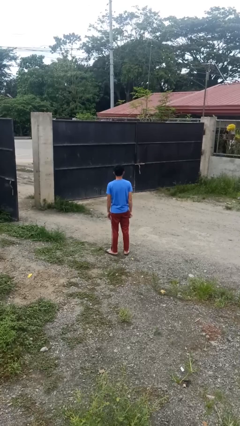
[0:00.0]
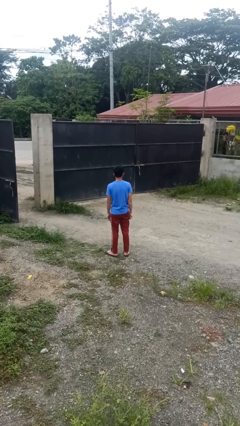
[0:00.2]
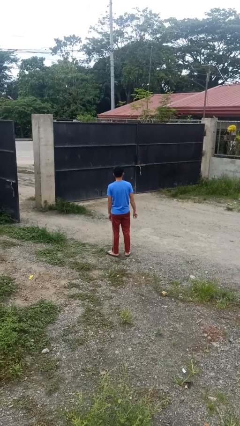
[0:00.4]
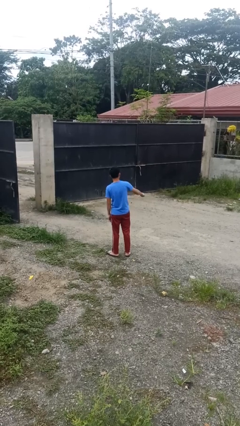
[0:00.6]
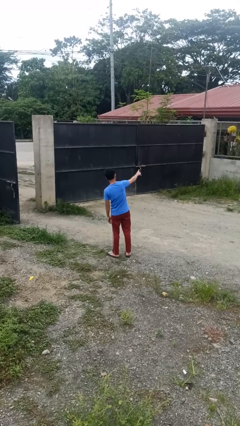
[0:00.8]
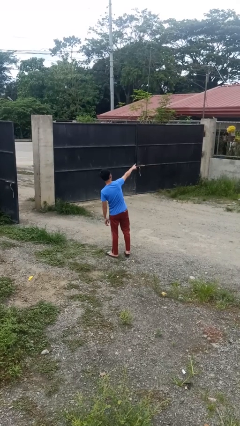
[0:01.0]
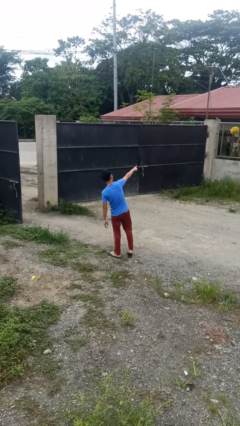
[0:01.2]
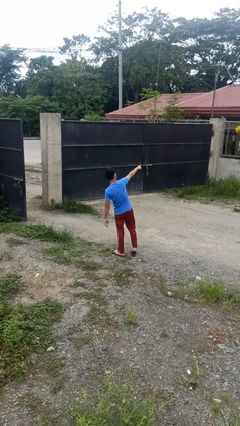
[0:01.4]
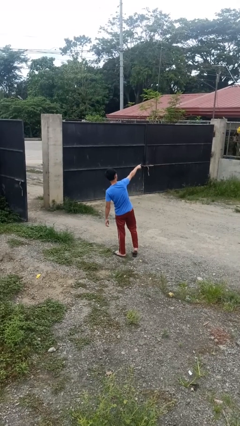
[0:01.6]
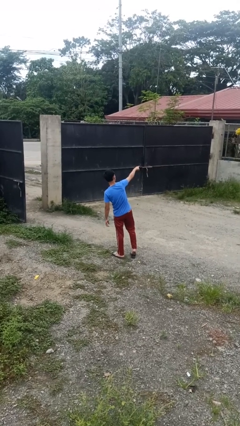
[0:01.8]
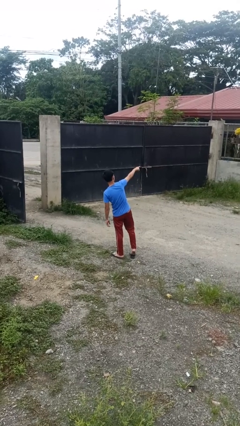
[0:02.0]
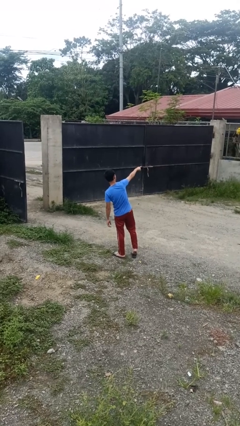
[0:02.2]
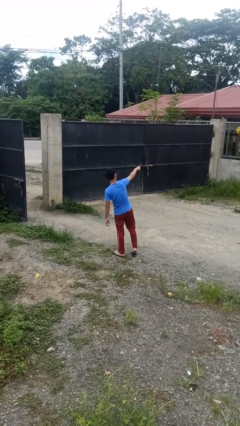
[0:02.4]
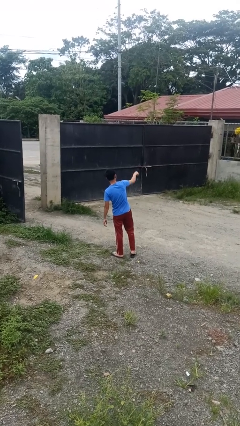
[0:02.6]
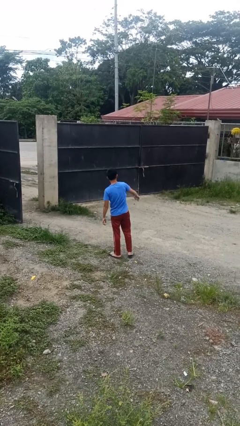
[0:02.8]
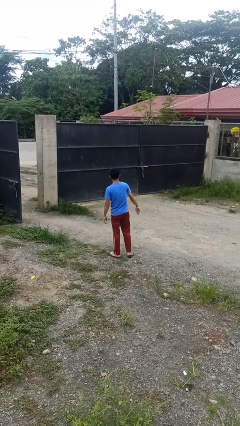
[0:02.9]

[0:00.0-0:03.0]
person points at person

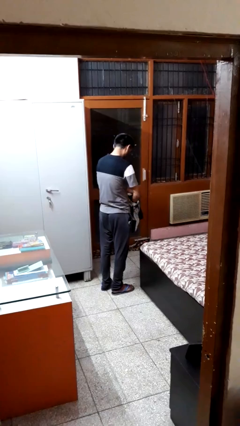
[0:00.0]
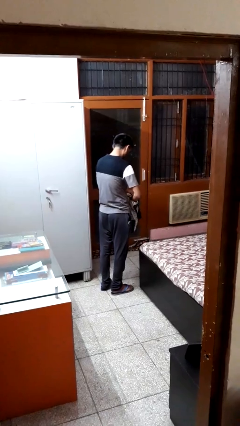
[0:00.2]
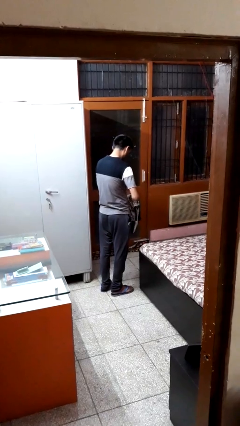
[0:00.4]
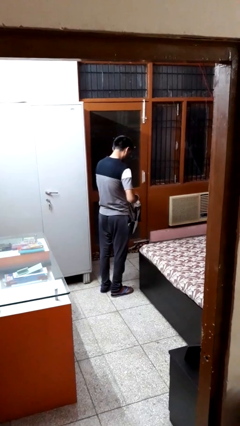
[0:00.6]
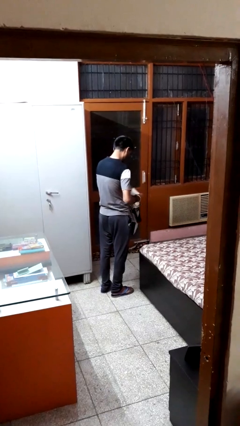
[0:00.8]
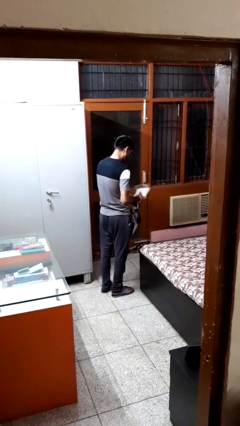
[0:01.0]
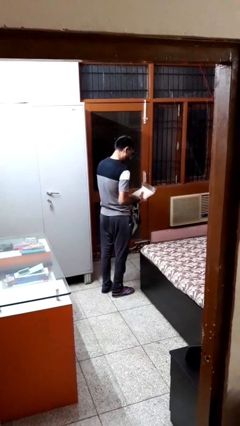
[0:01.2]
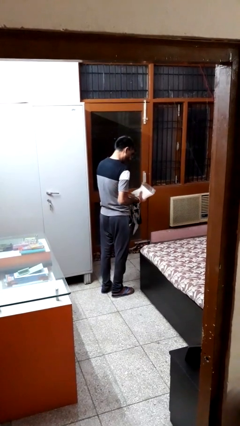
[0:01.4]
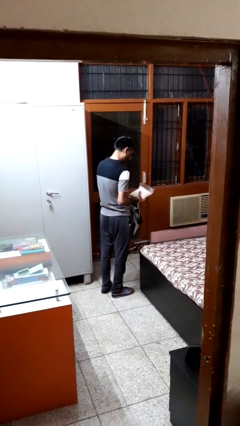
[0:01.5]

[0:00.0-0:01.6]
person takes object from bag

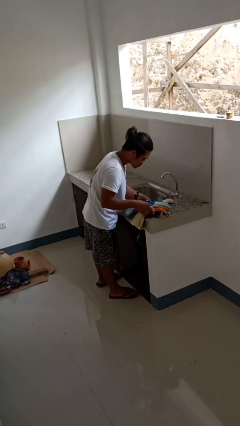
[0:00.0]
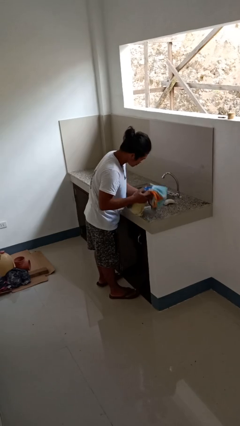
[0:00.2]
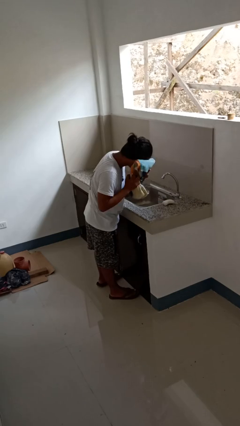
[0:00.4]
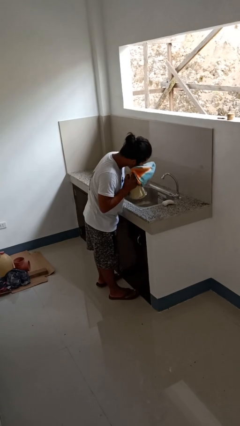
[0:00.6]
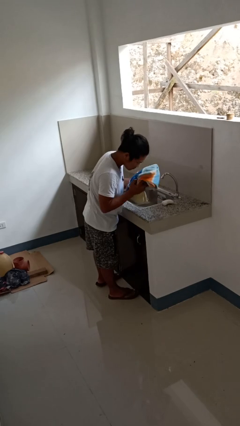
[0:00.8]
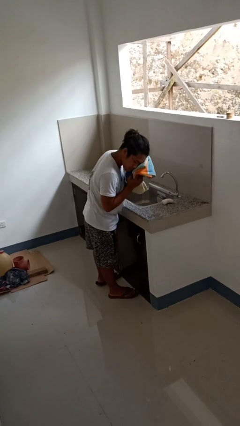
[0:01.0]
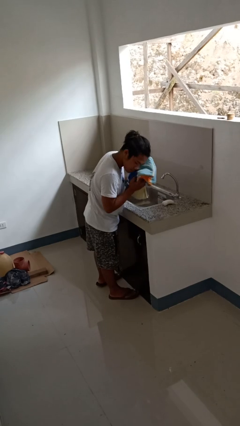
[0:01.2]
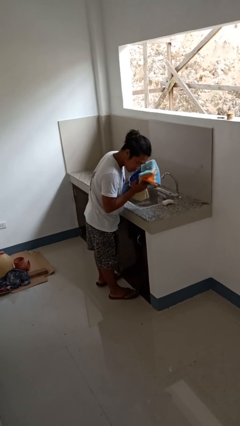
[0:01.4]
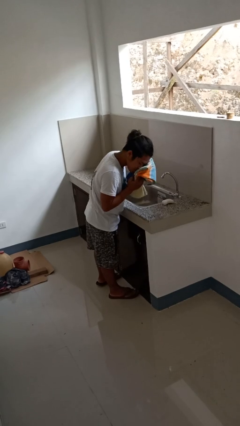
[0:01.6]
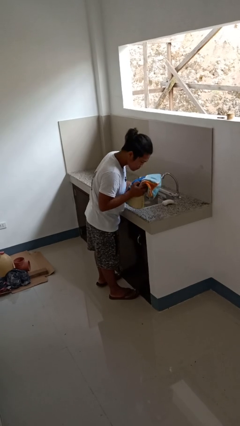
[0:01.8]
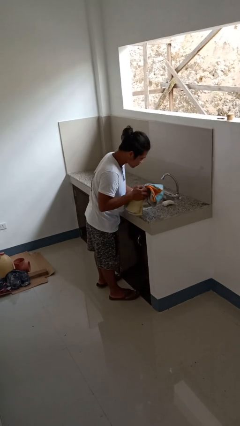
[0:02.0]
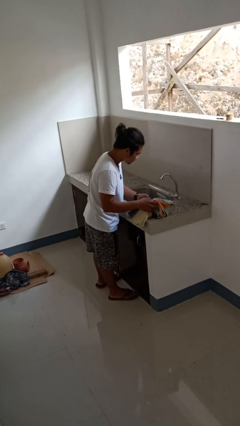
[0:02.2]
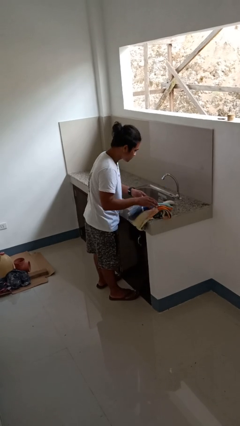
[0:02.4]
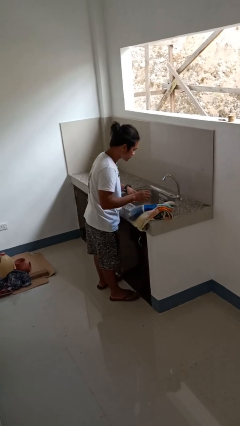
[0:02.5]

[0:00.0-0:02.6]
person dries face with towel

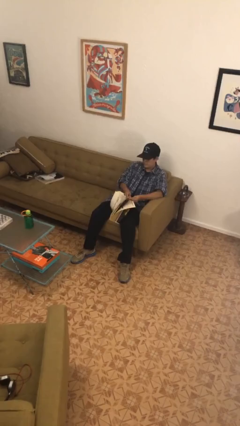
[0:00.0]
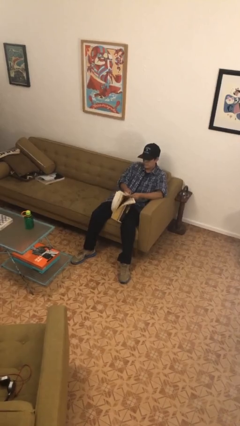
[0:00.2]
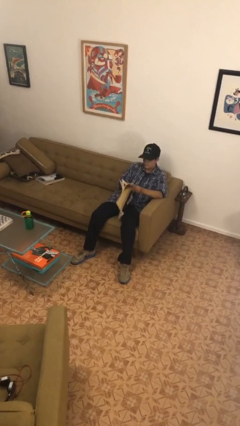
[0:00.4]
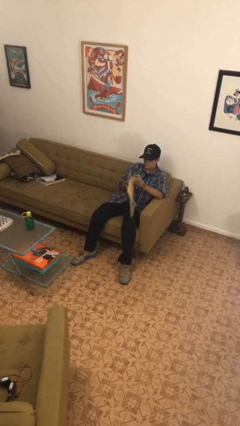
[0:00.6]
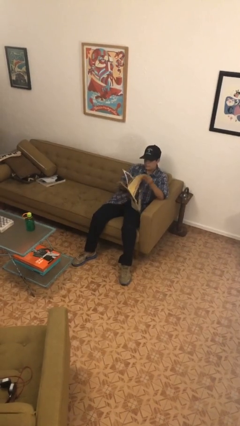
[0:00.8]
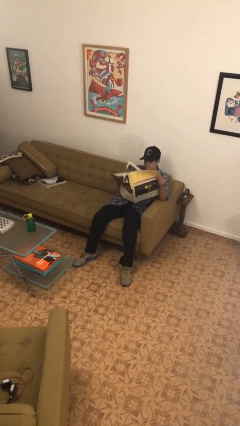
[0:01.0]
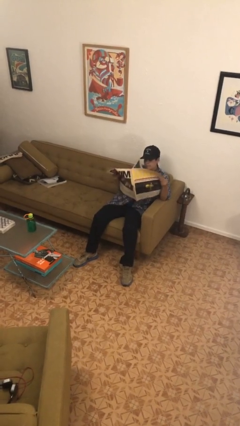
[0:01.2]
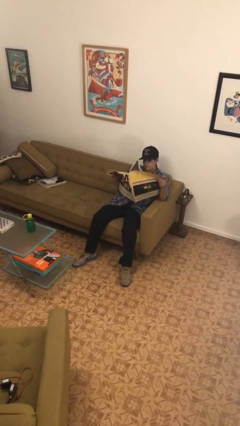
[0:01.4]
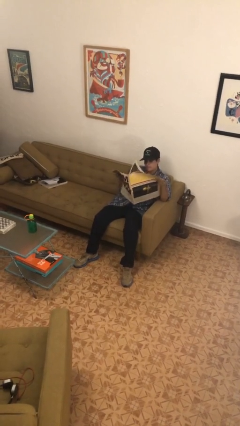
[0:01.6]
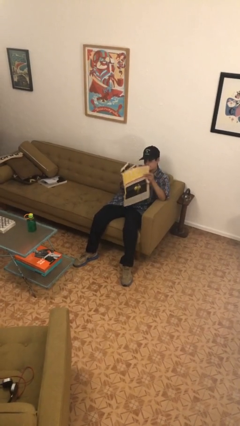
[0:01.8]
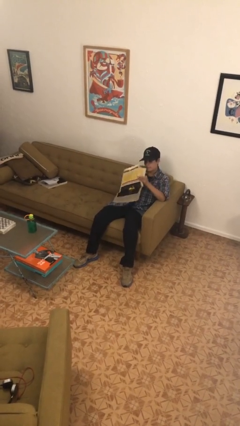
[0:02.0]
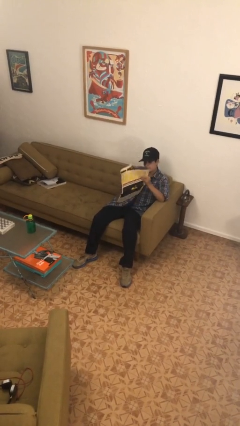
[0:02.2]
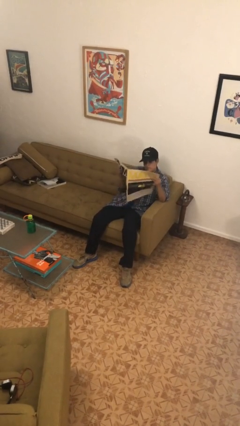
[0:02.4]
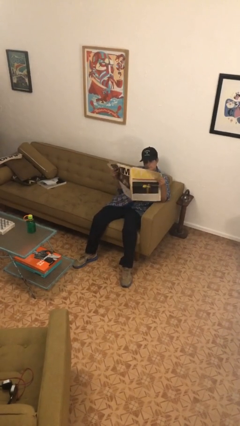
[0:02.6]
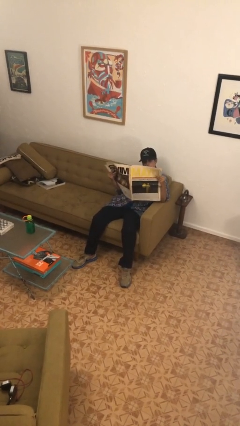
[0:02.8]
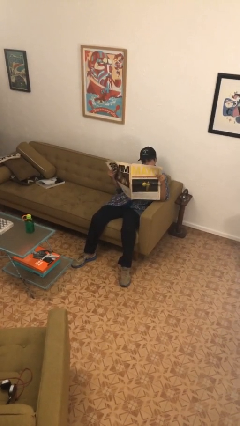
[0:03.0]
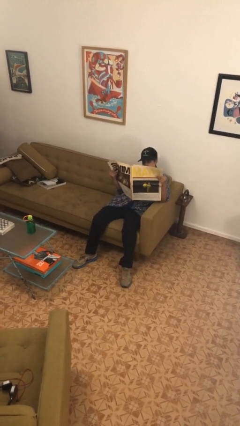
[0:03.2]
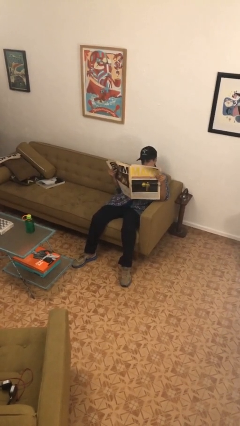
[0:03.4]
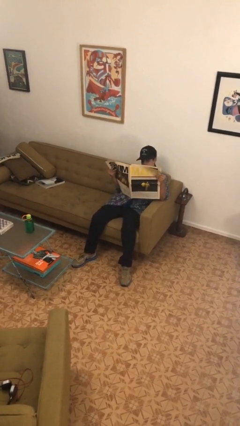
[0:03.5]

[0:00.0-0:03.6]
person reads newspaper

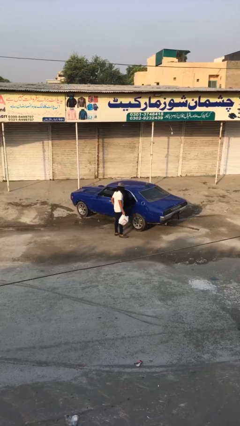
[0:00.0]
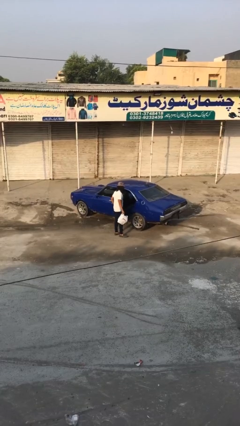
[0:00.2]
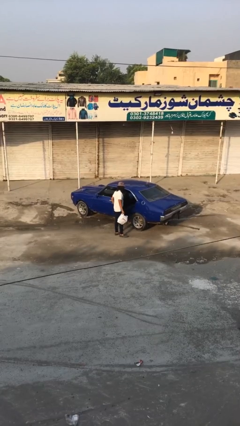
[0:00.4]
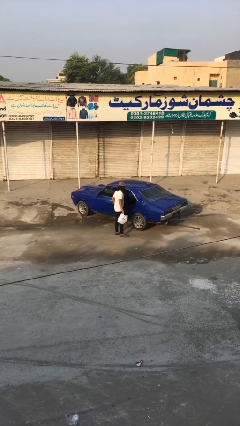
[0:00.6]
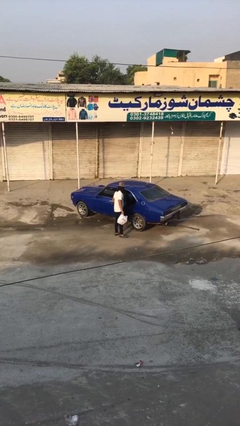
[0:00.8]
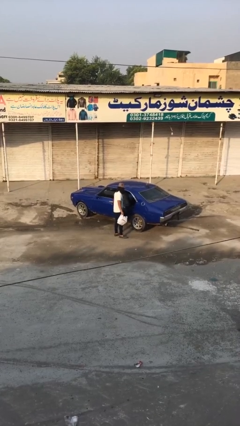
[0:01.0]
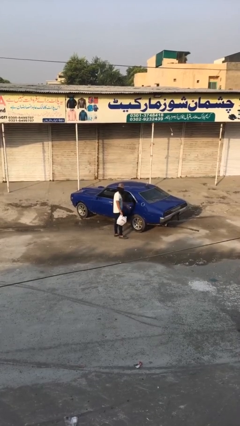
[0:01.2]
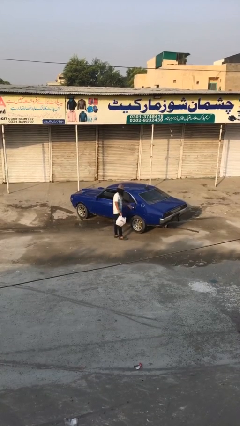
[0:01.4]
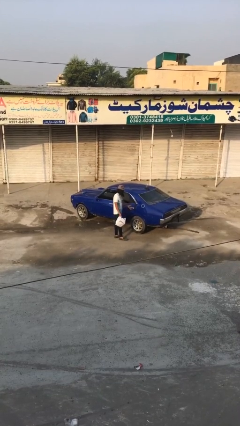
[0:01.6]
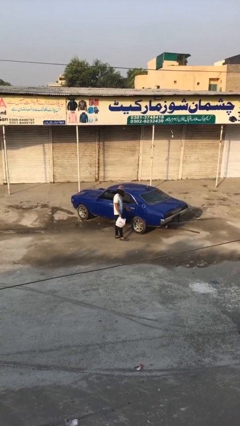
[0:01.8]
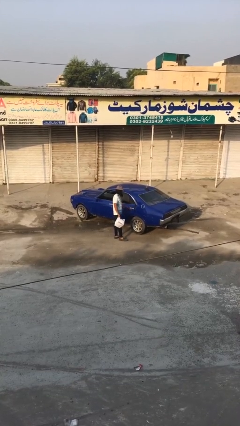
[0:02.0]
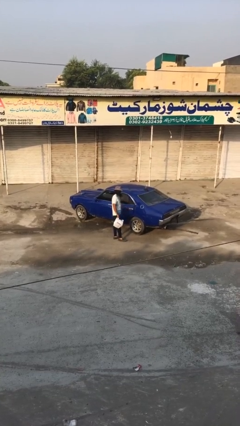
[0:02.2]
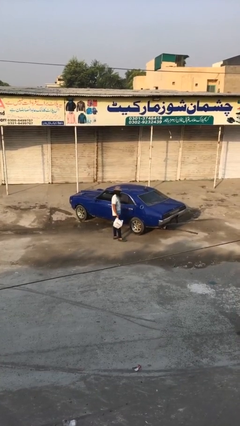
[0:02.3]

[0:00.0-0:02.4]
person closes car door

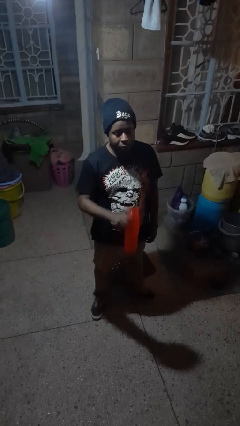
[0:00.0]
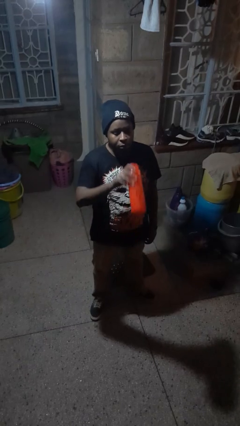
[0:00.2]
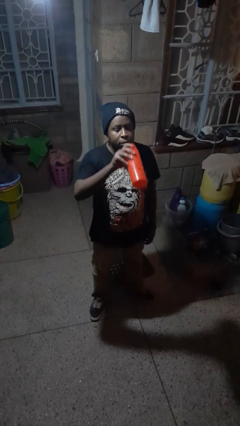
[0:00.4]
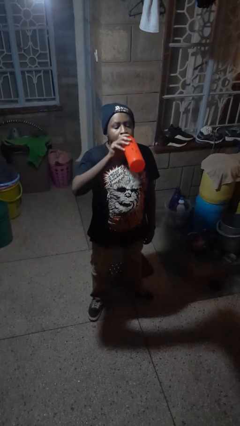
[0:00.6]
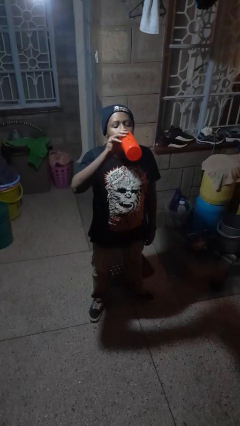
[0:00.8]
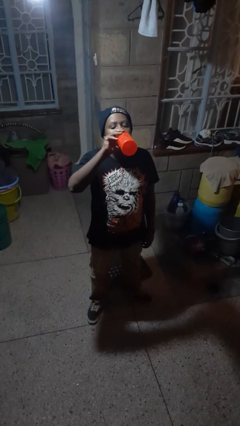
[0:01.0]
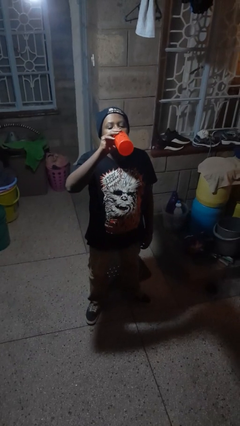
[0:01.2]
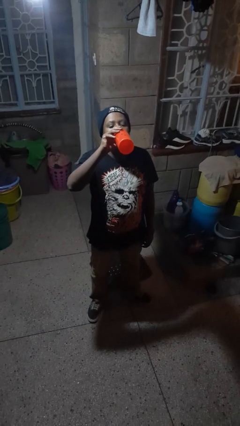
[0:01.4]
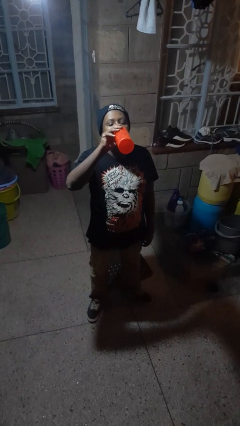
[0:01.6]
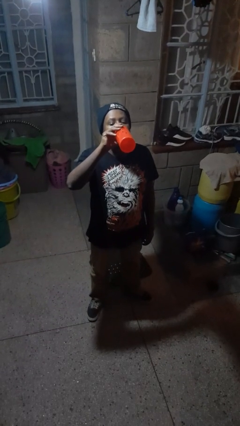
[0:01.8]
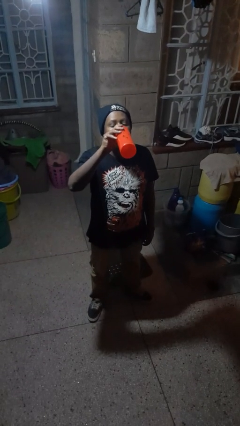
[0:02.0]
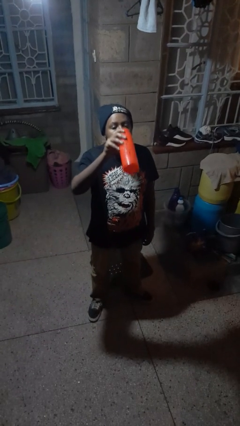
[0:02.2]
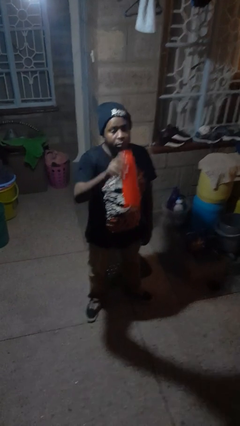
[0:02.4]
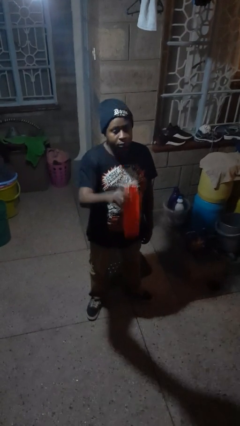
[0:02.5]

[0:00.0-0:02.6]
person drinks from bottle

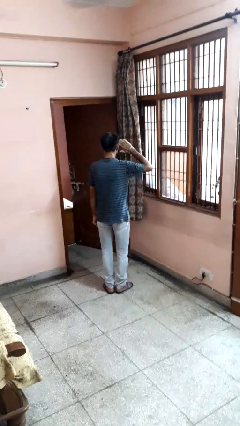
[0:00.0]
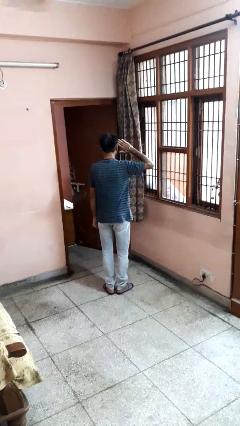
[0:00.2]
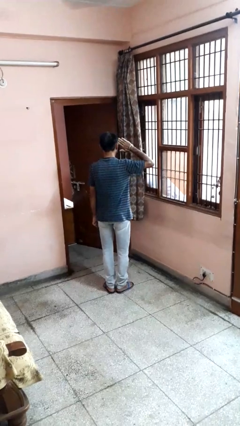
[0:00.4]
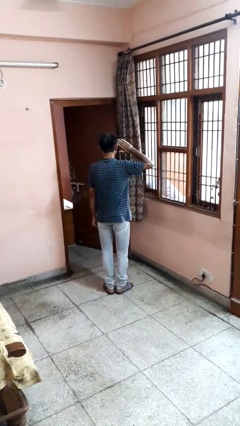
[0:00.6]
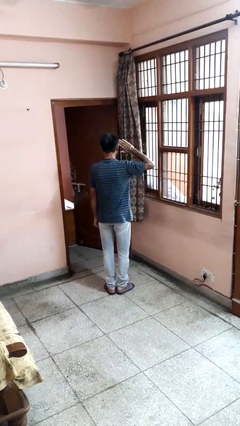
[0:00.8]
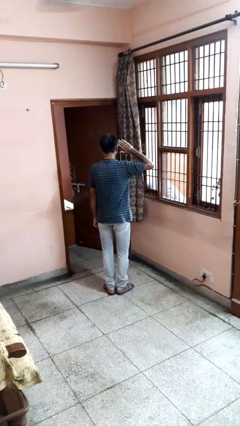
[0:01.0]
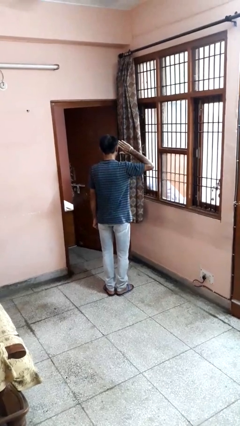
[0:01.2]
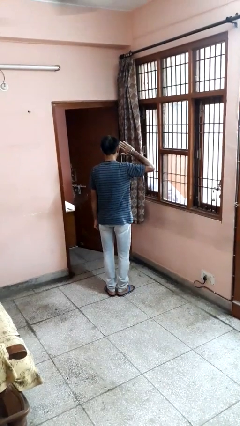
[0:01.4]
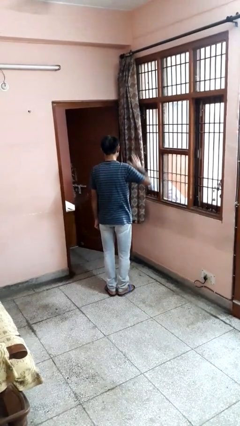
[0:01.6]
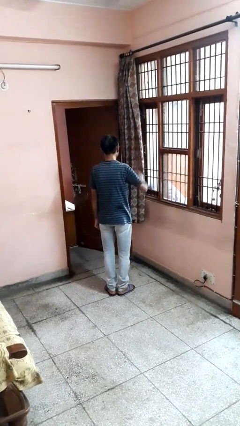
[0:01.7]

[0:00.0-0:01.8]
person salutes
